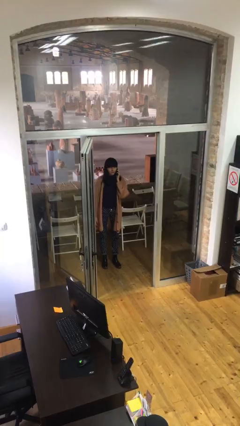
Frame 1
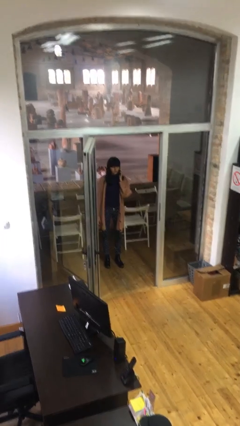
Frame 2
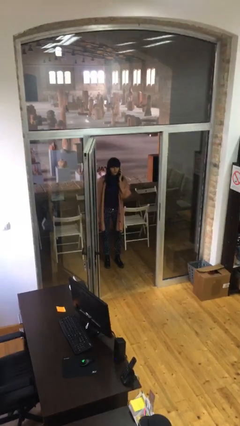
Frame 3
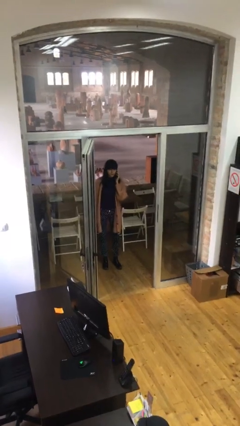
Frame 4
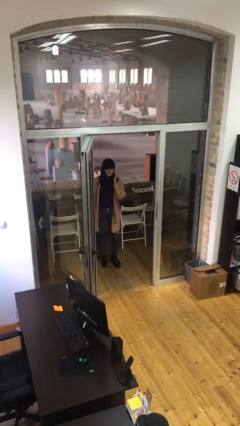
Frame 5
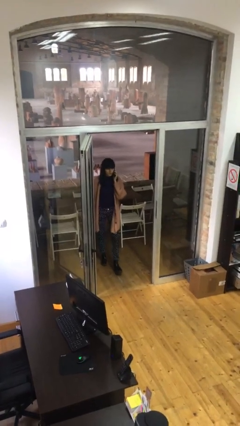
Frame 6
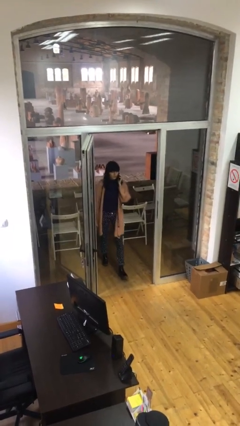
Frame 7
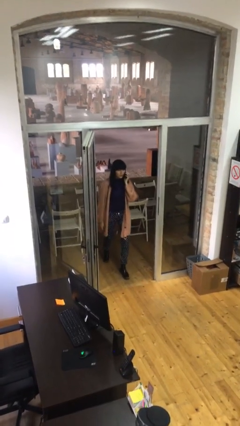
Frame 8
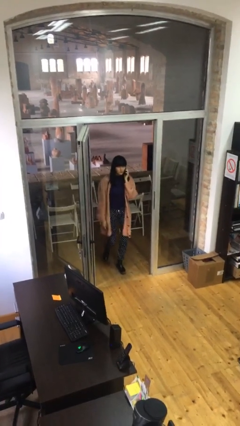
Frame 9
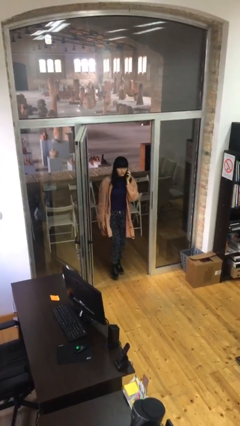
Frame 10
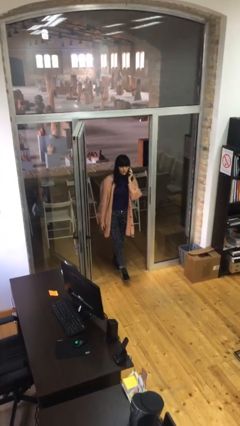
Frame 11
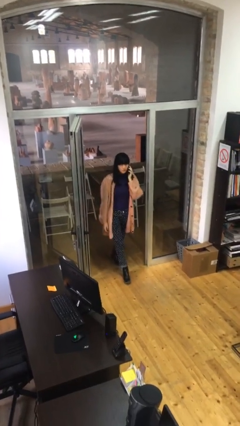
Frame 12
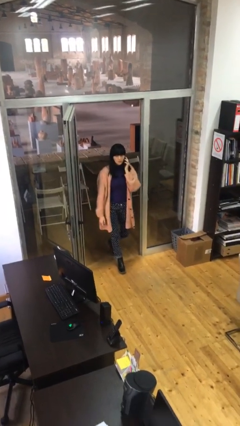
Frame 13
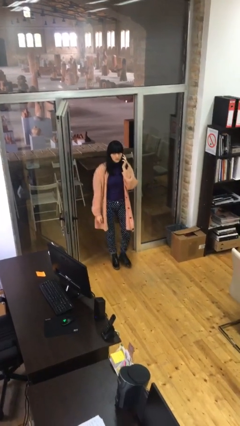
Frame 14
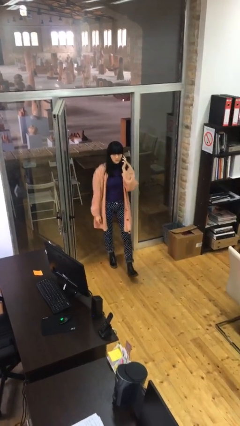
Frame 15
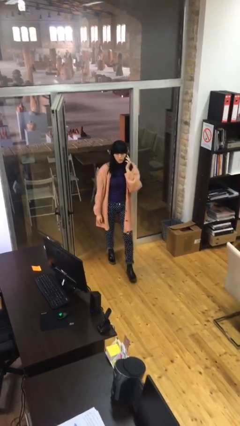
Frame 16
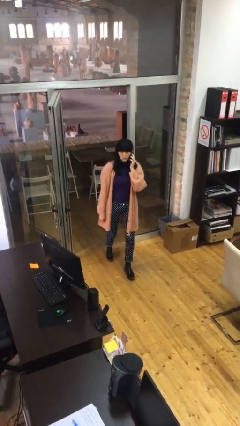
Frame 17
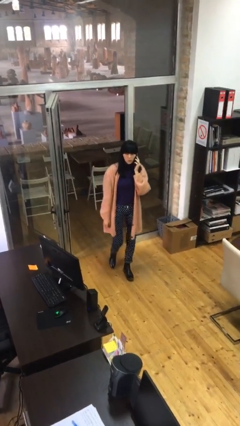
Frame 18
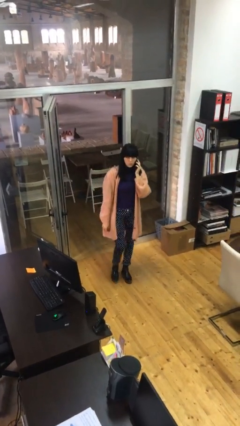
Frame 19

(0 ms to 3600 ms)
person enters scene through structure

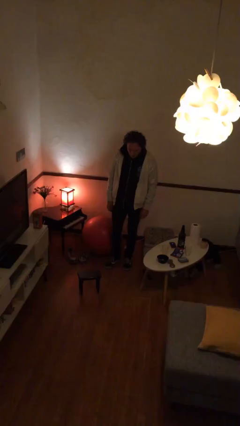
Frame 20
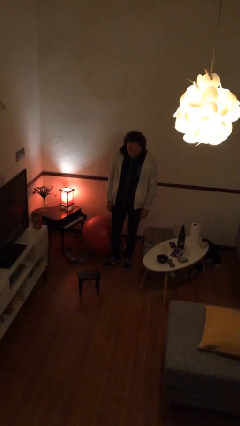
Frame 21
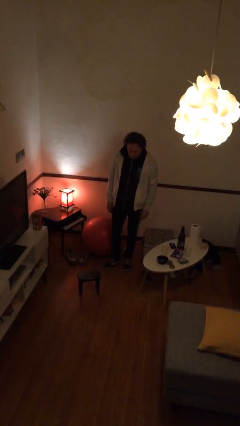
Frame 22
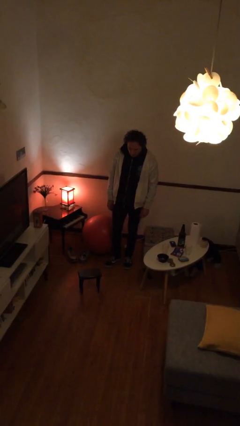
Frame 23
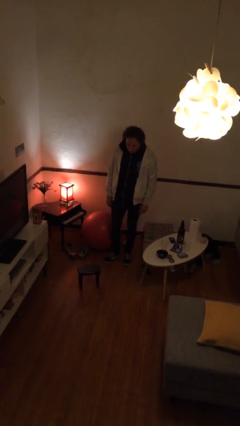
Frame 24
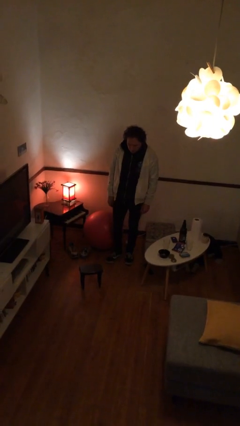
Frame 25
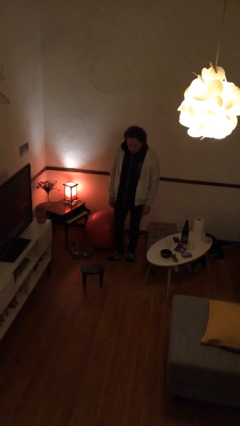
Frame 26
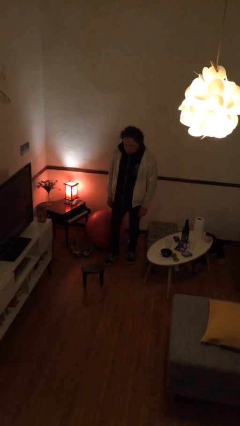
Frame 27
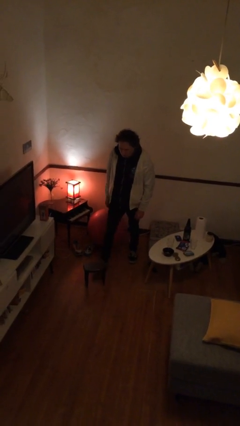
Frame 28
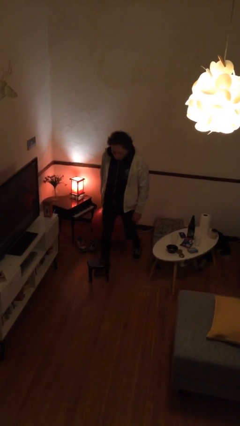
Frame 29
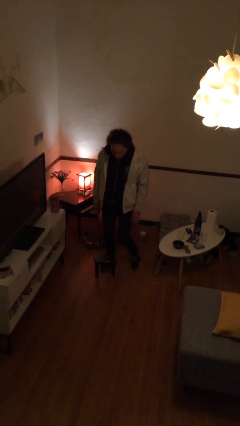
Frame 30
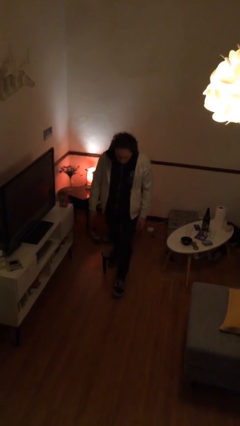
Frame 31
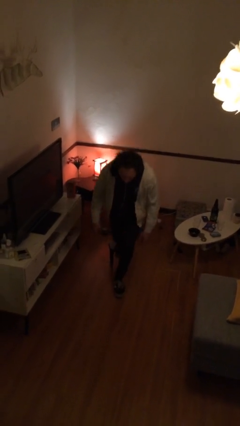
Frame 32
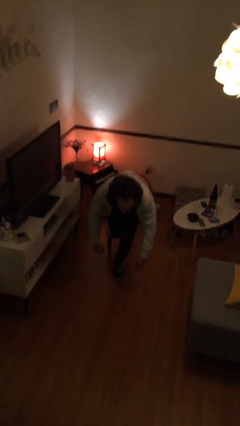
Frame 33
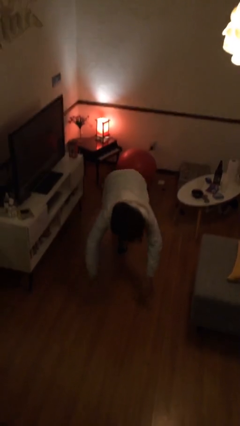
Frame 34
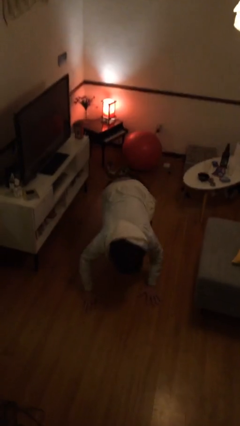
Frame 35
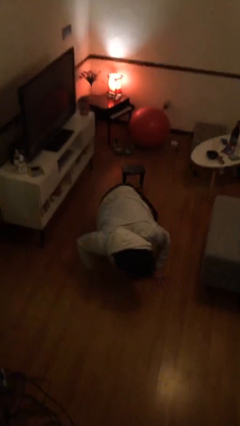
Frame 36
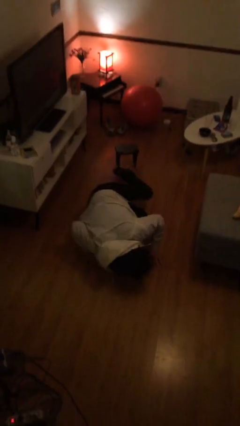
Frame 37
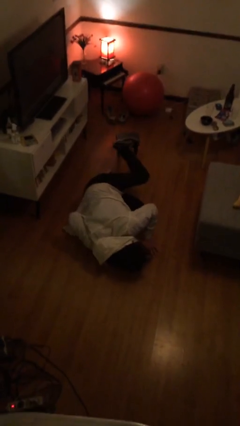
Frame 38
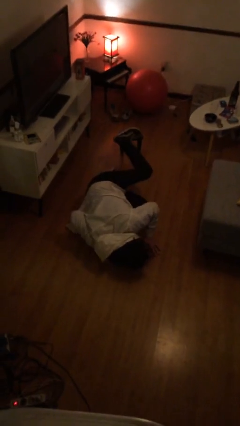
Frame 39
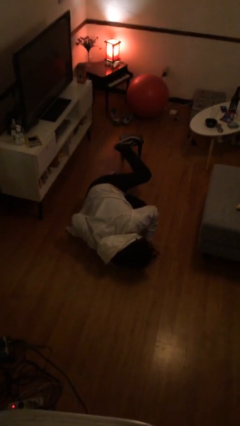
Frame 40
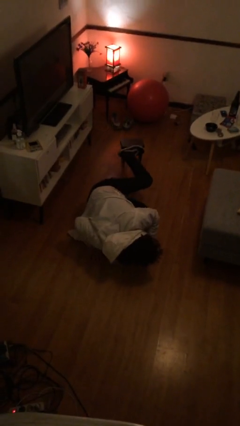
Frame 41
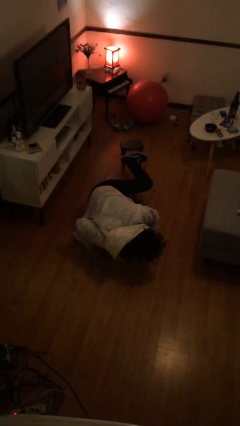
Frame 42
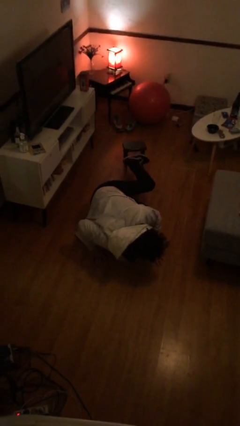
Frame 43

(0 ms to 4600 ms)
person trips on object on floor

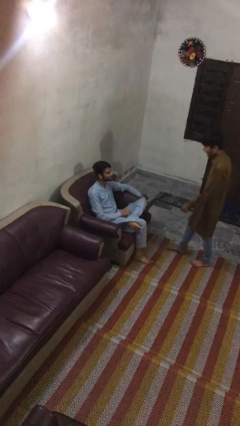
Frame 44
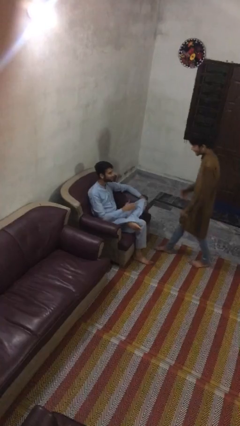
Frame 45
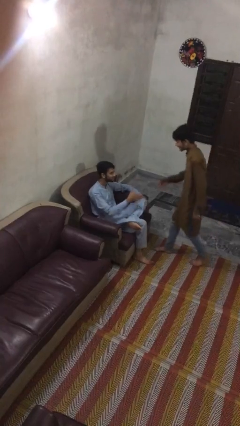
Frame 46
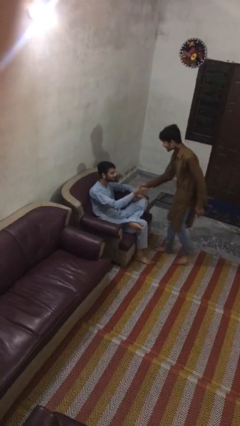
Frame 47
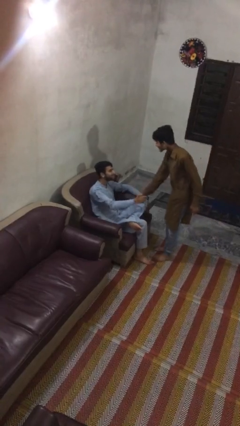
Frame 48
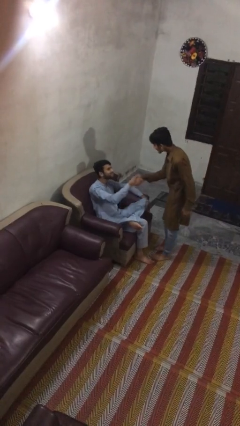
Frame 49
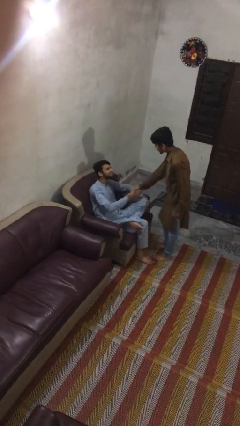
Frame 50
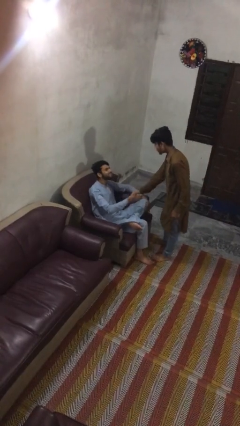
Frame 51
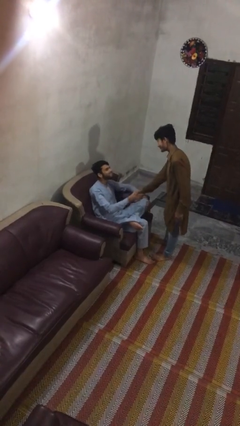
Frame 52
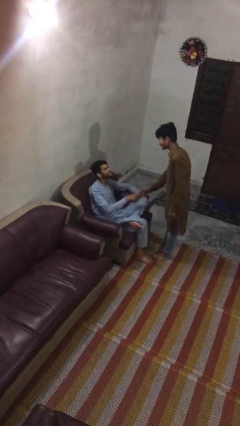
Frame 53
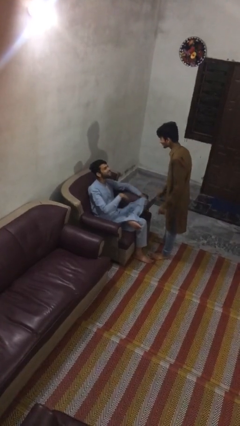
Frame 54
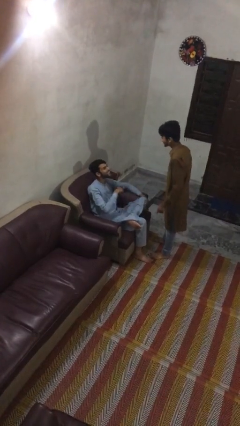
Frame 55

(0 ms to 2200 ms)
person shakes hand

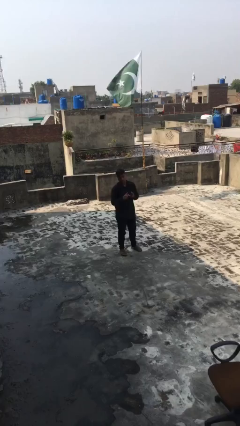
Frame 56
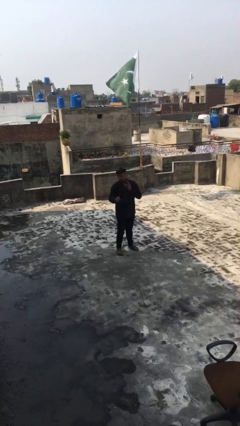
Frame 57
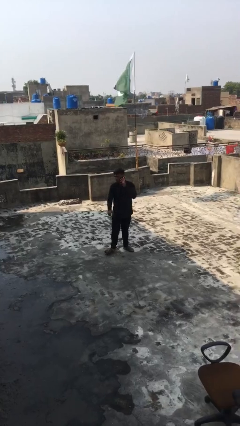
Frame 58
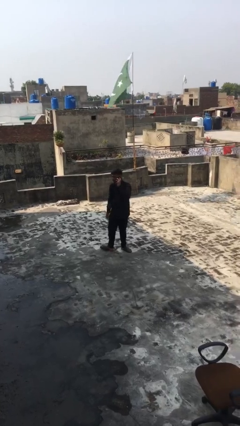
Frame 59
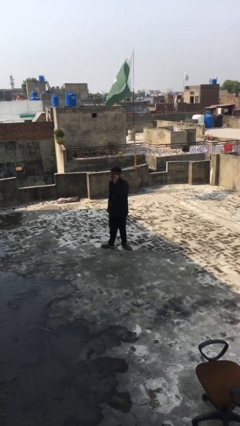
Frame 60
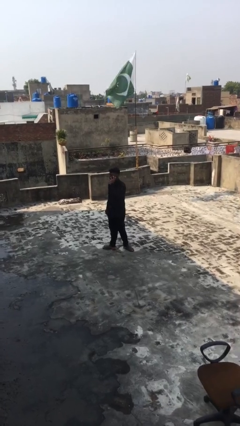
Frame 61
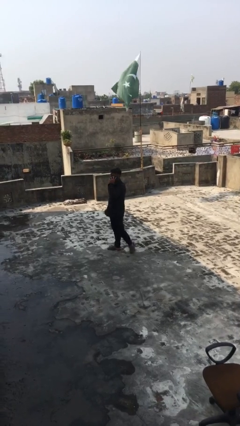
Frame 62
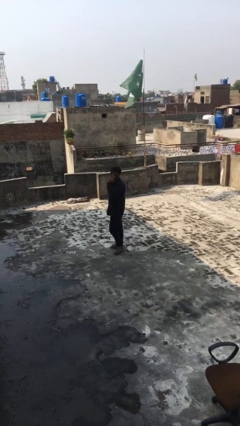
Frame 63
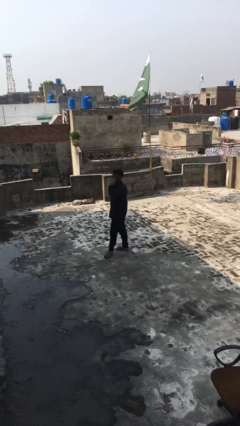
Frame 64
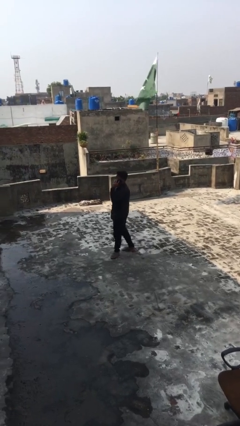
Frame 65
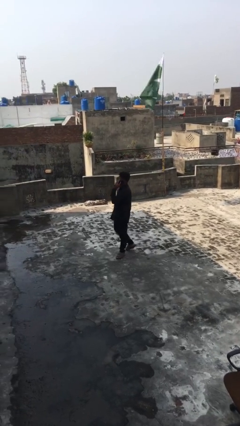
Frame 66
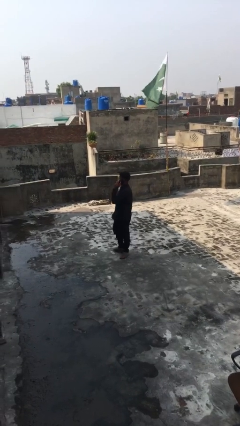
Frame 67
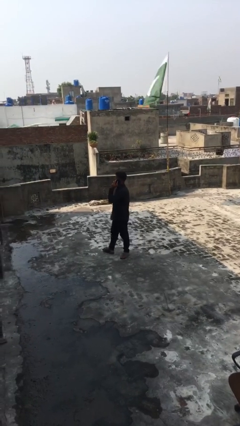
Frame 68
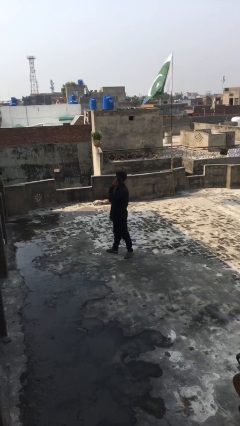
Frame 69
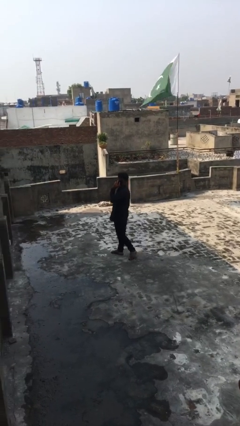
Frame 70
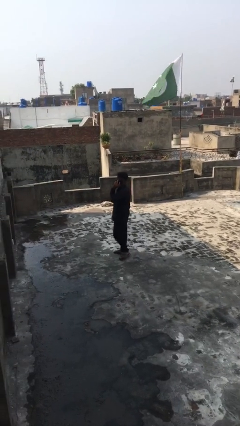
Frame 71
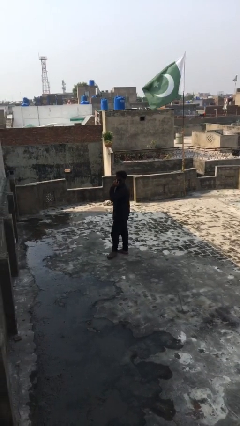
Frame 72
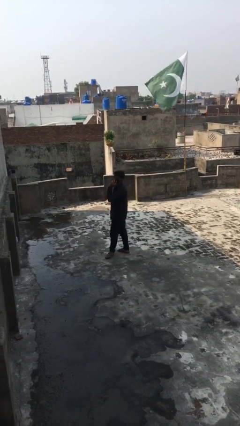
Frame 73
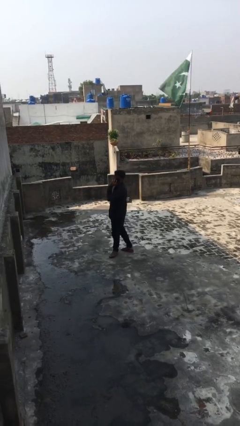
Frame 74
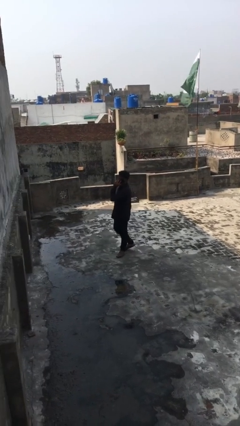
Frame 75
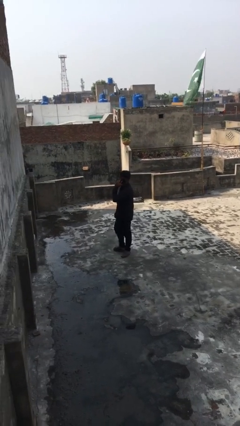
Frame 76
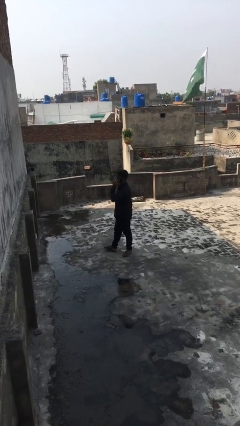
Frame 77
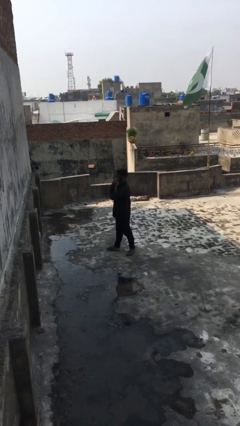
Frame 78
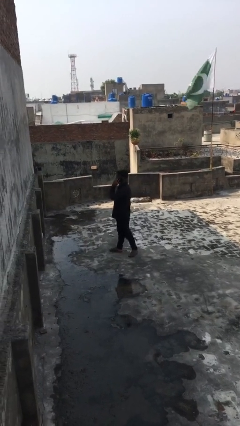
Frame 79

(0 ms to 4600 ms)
person talks on phone

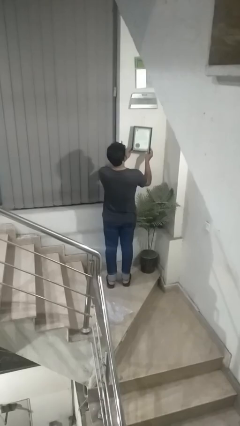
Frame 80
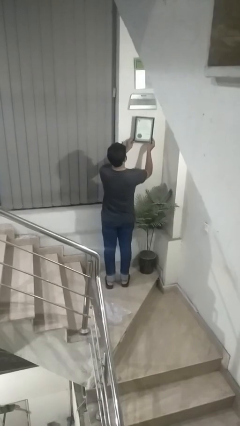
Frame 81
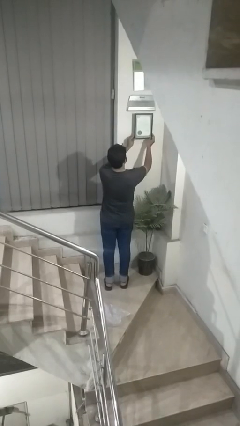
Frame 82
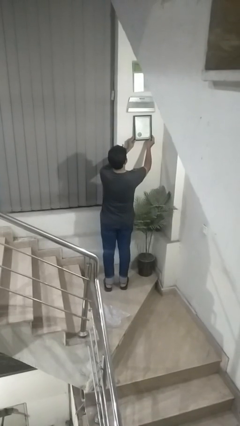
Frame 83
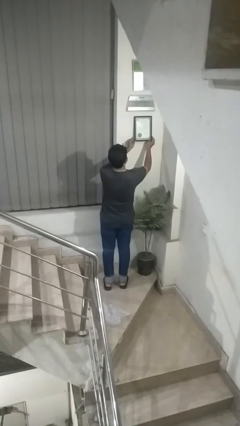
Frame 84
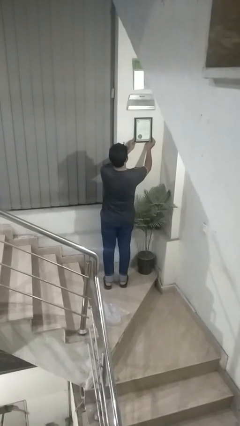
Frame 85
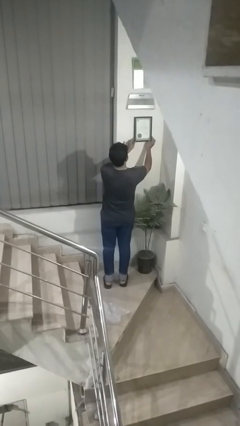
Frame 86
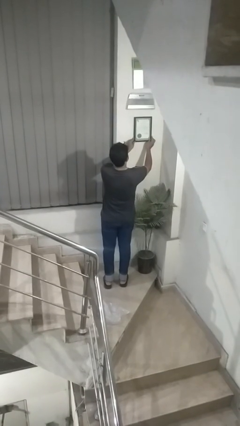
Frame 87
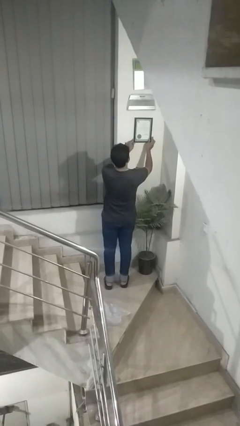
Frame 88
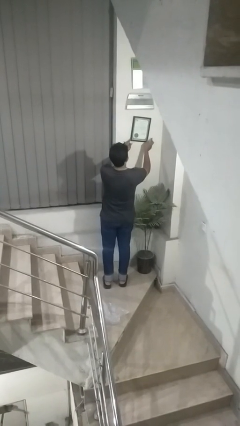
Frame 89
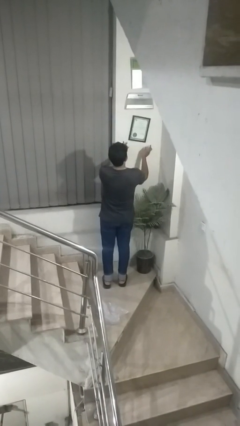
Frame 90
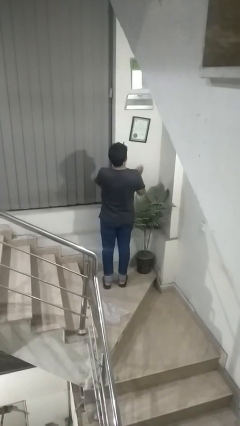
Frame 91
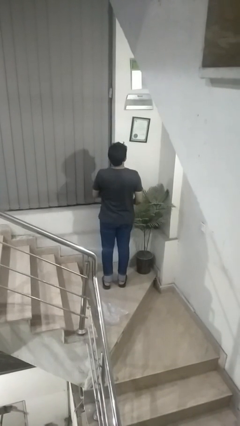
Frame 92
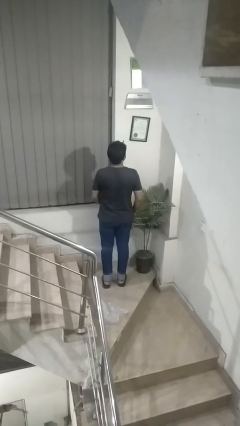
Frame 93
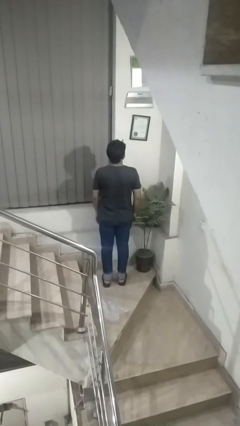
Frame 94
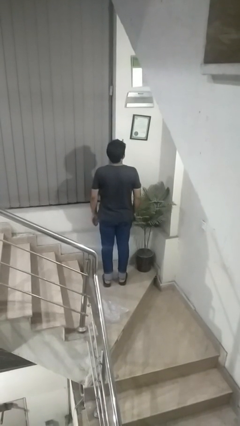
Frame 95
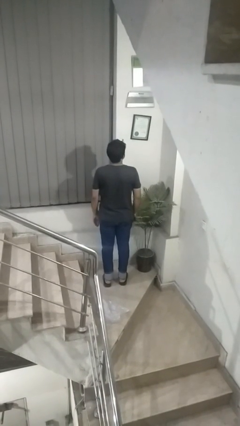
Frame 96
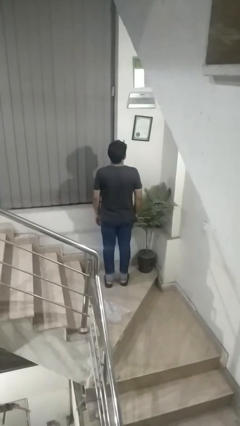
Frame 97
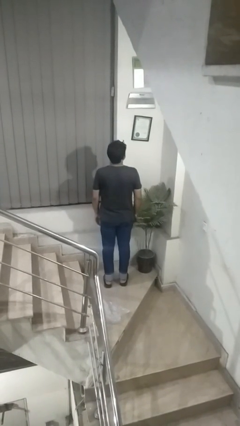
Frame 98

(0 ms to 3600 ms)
person puts up picture frame
